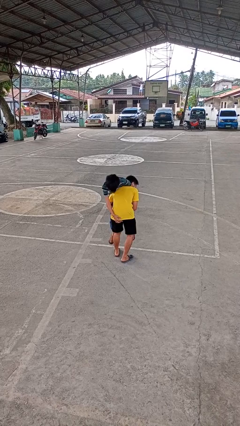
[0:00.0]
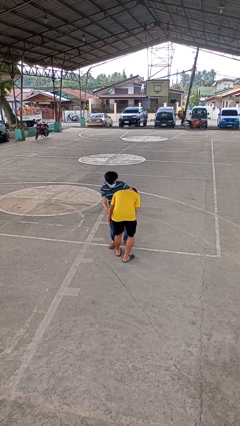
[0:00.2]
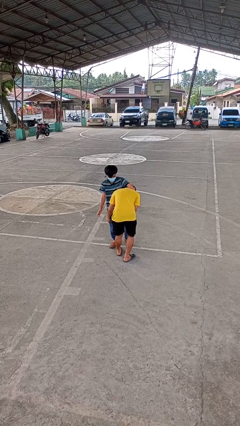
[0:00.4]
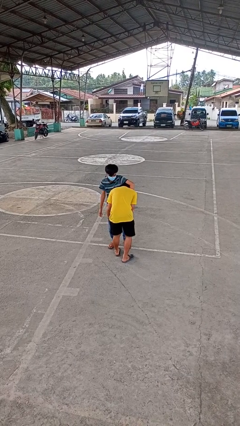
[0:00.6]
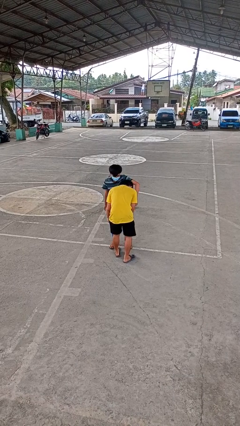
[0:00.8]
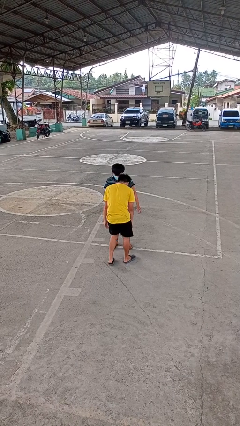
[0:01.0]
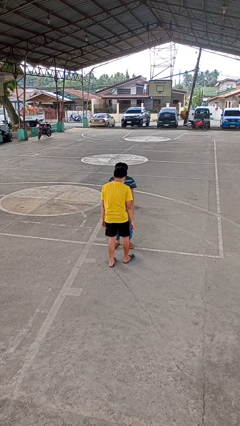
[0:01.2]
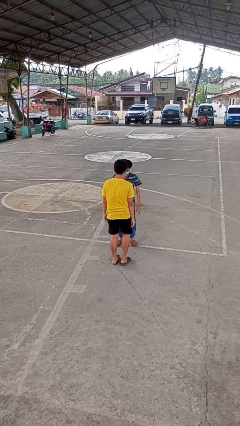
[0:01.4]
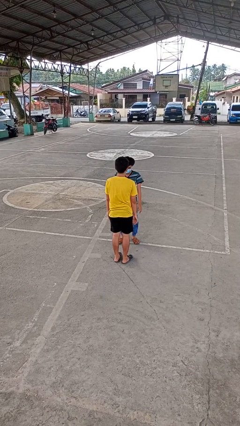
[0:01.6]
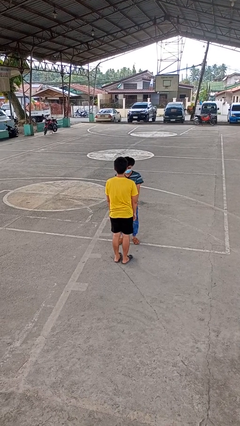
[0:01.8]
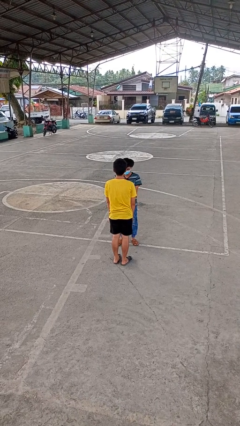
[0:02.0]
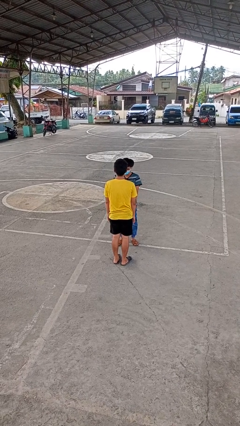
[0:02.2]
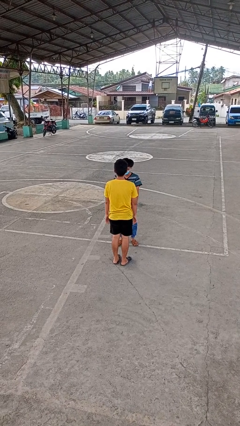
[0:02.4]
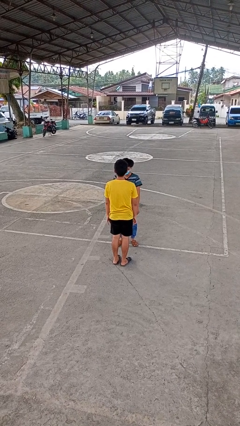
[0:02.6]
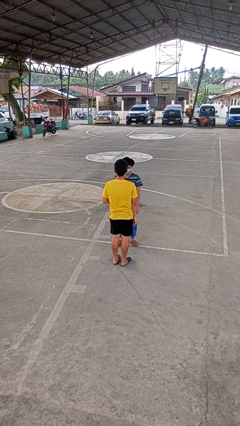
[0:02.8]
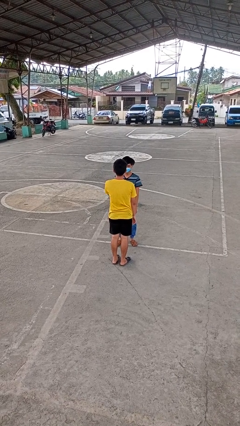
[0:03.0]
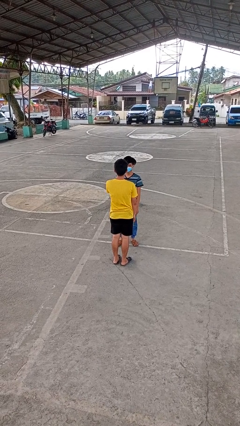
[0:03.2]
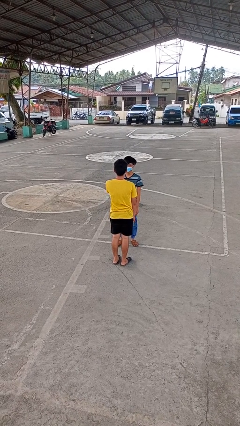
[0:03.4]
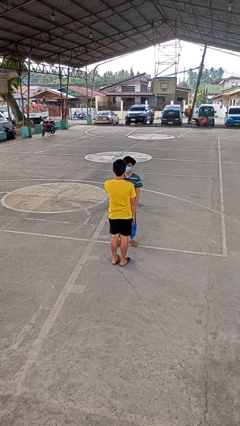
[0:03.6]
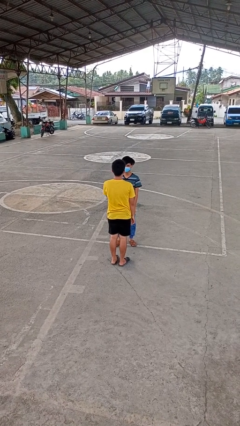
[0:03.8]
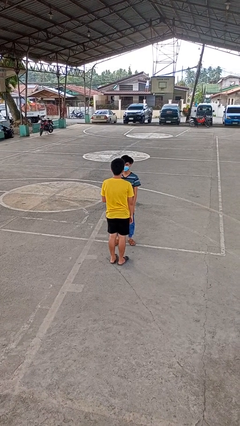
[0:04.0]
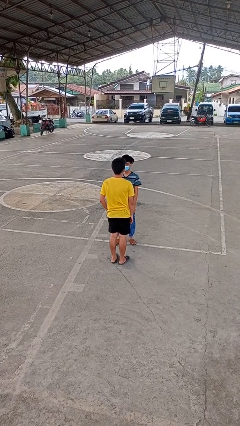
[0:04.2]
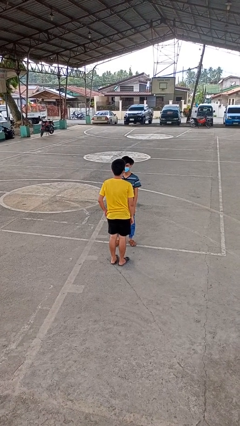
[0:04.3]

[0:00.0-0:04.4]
person puts down person

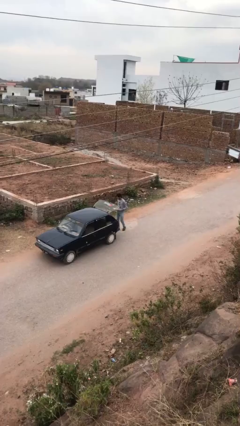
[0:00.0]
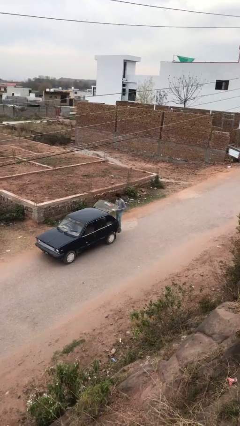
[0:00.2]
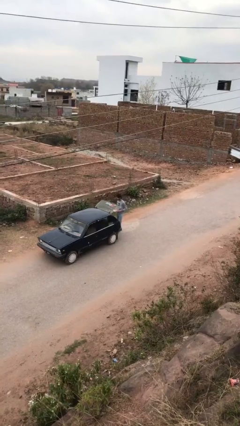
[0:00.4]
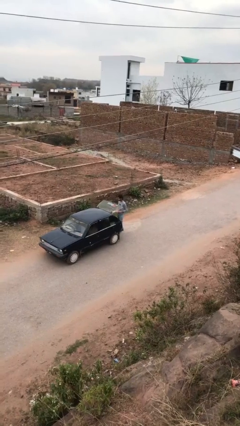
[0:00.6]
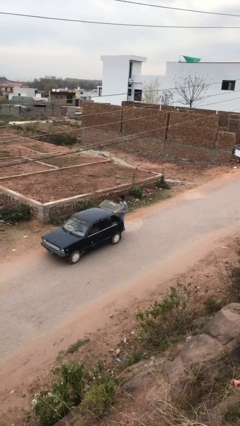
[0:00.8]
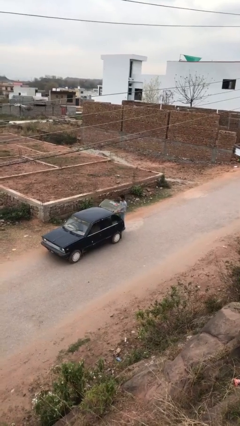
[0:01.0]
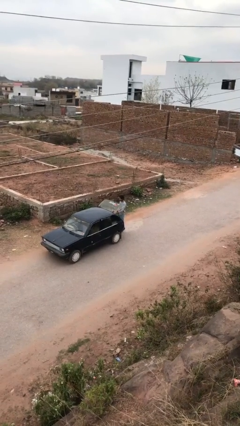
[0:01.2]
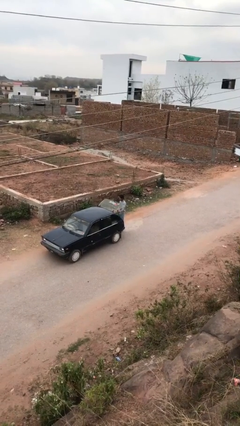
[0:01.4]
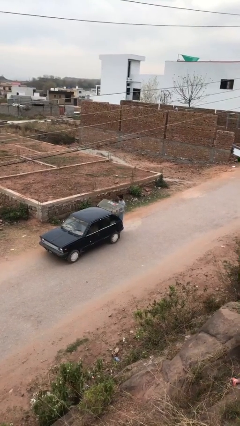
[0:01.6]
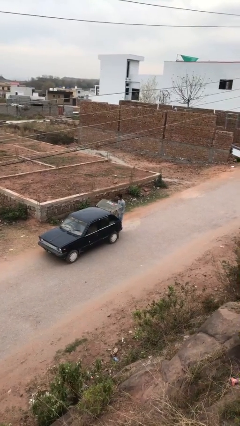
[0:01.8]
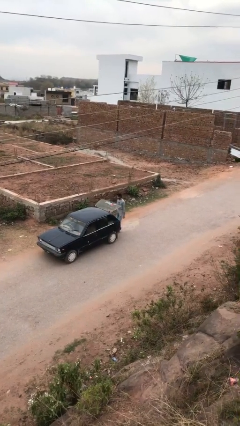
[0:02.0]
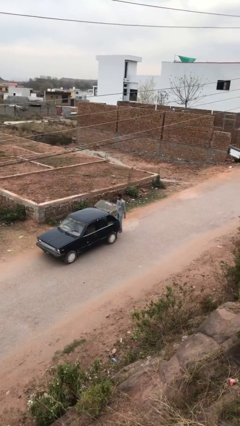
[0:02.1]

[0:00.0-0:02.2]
person loads car

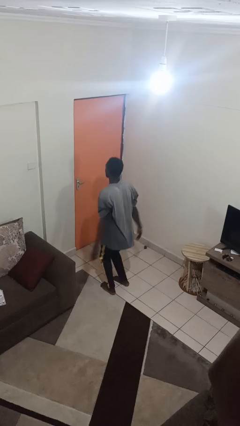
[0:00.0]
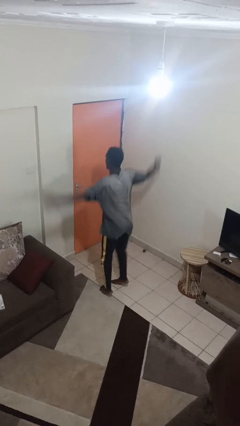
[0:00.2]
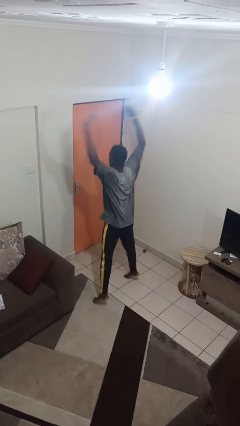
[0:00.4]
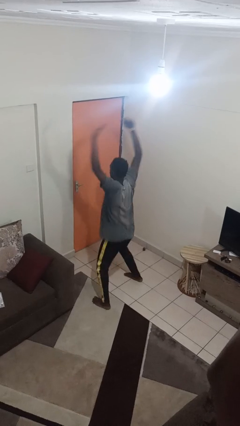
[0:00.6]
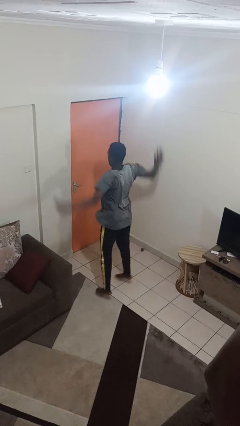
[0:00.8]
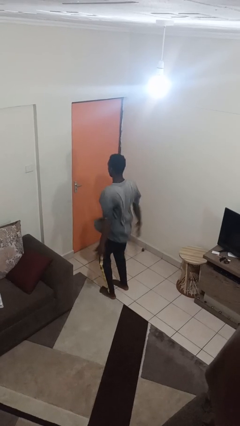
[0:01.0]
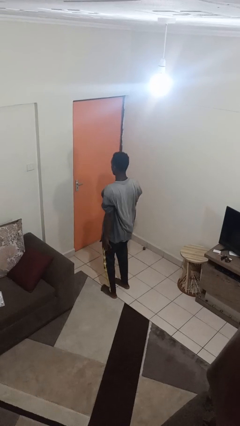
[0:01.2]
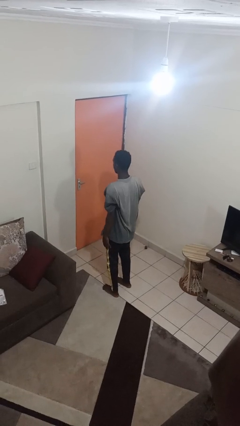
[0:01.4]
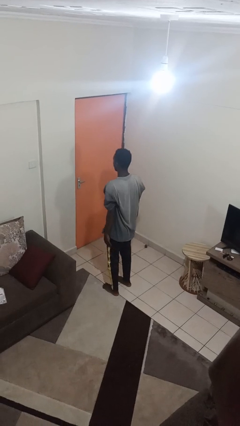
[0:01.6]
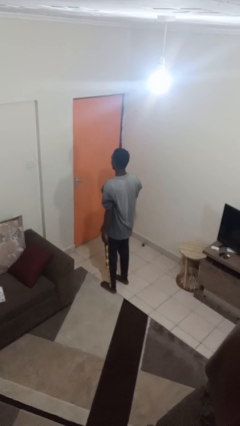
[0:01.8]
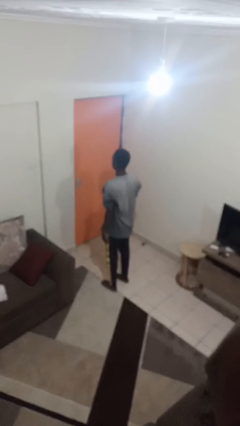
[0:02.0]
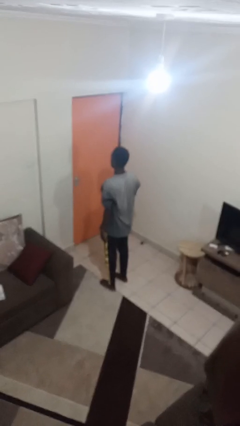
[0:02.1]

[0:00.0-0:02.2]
person exercises with jumping jacks

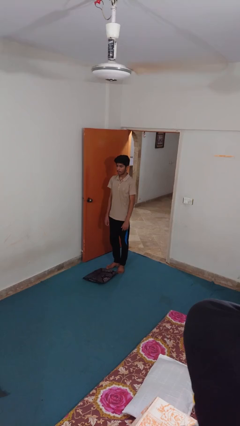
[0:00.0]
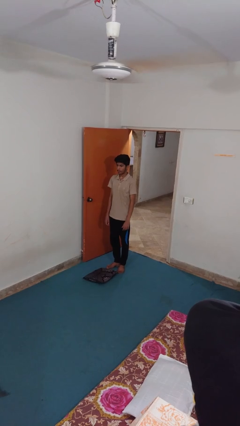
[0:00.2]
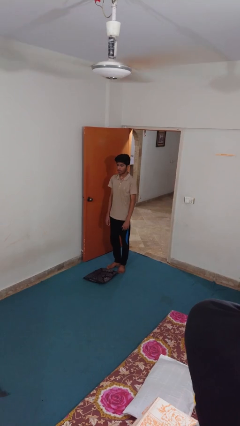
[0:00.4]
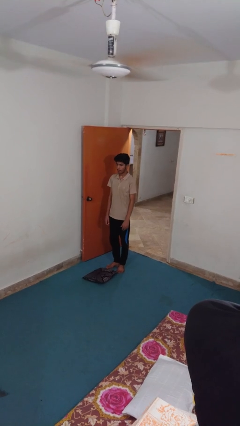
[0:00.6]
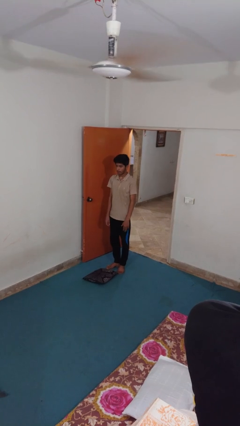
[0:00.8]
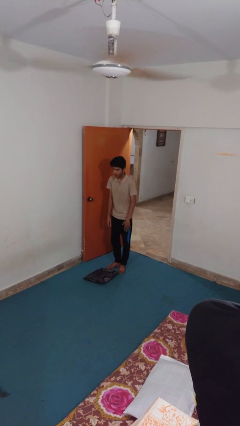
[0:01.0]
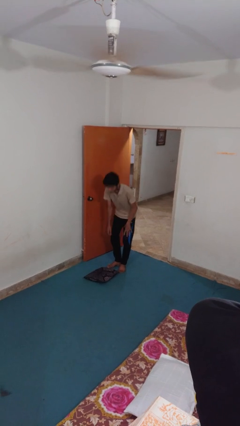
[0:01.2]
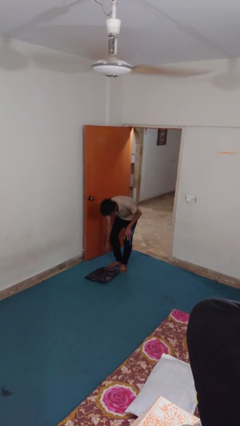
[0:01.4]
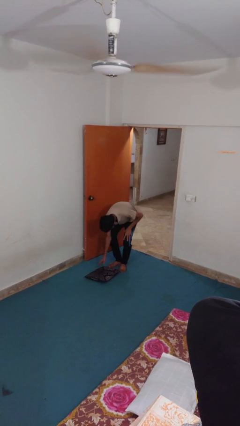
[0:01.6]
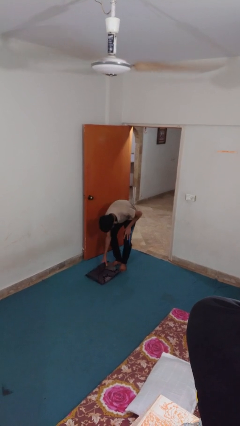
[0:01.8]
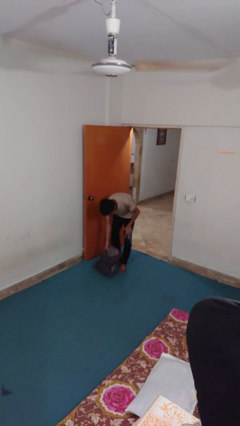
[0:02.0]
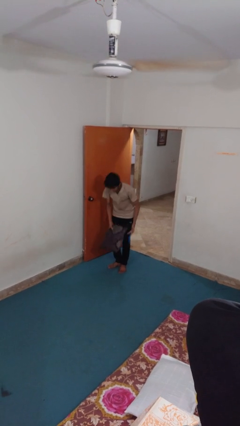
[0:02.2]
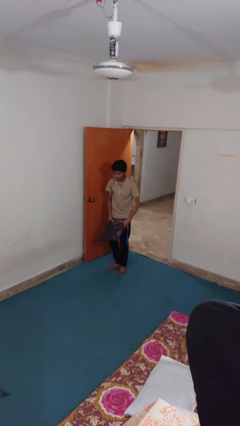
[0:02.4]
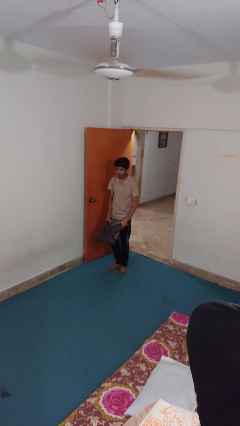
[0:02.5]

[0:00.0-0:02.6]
person picks up object from floor

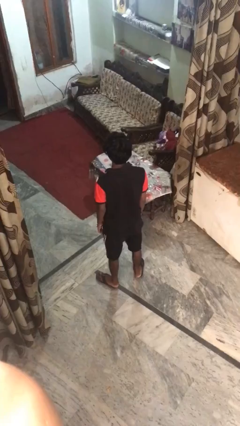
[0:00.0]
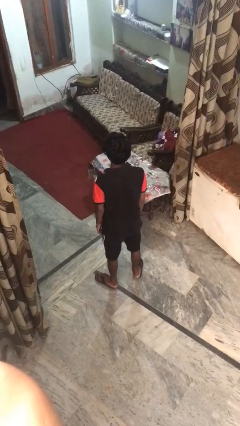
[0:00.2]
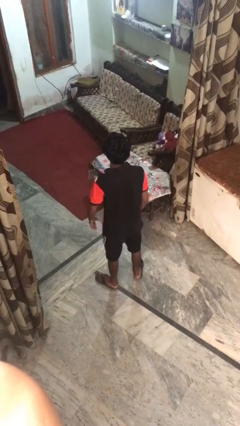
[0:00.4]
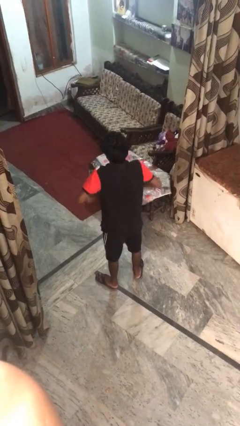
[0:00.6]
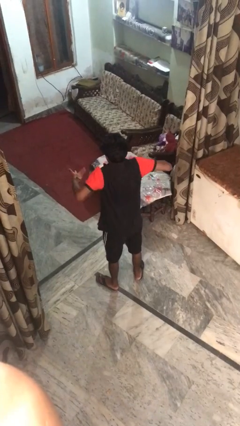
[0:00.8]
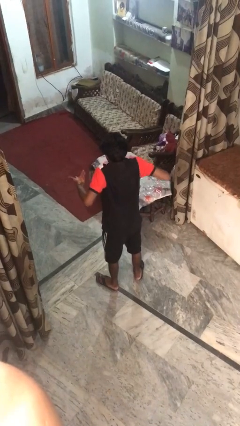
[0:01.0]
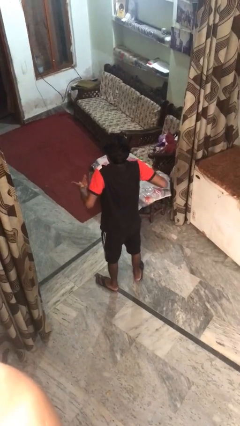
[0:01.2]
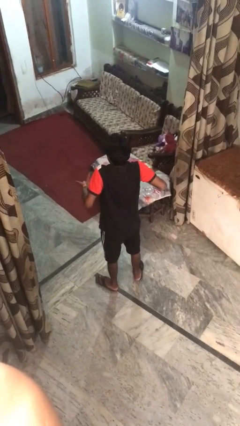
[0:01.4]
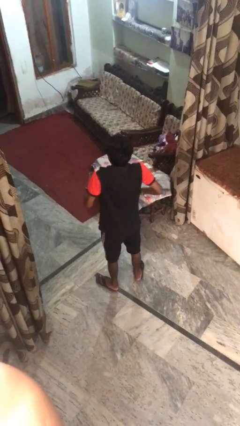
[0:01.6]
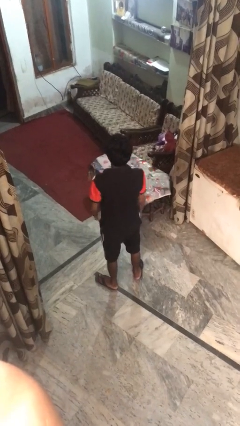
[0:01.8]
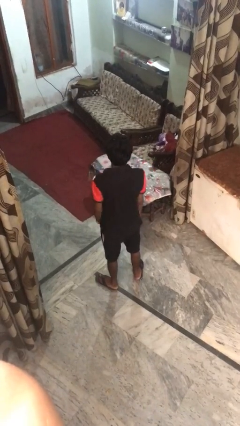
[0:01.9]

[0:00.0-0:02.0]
person shrugs

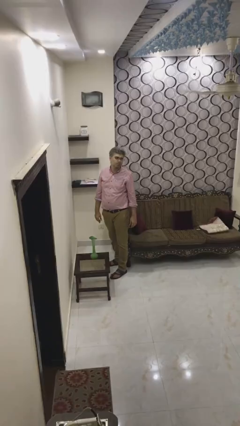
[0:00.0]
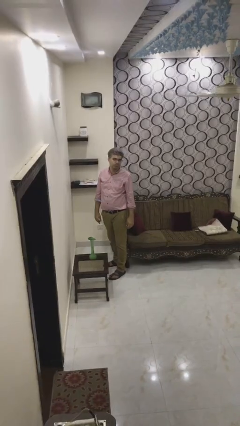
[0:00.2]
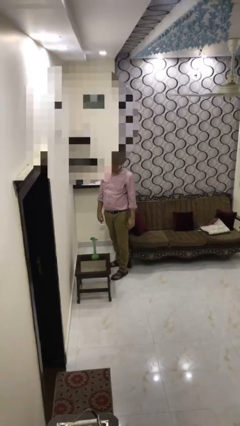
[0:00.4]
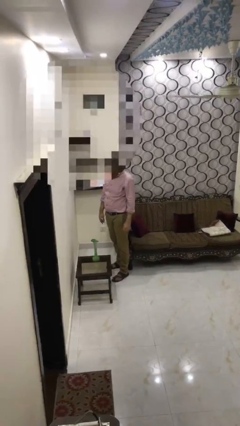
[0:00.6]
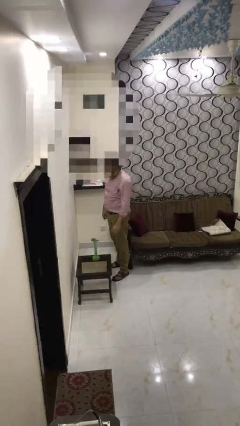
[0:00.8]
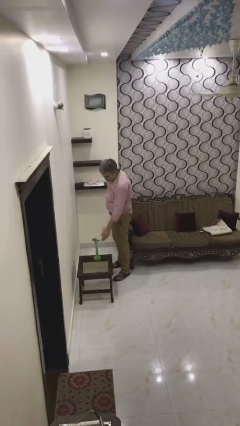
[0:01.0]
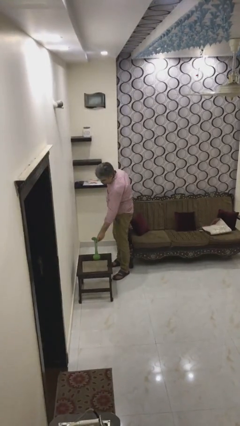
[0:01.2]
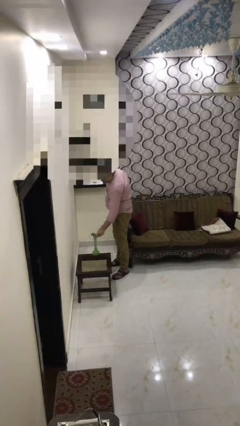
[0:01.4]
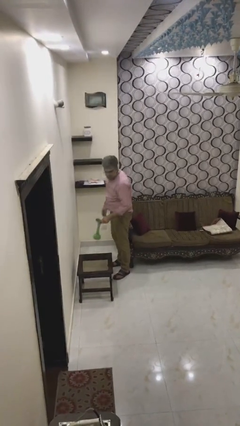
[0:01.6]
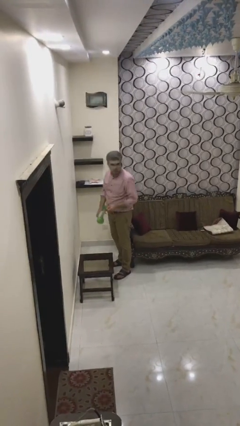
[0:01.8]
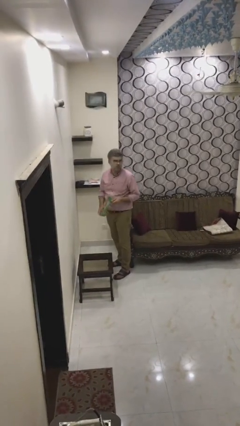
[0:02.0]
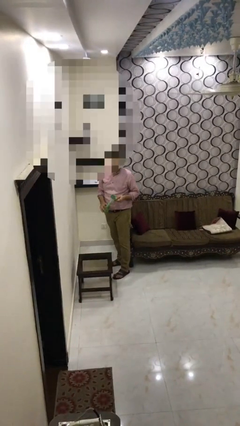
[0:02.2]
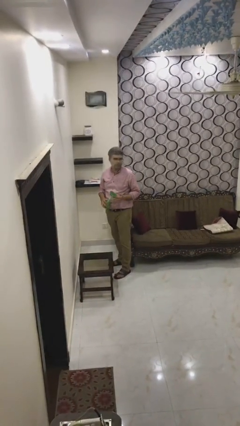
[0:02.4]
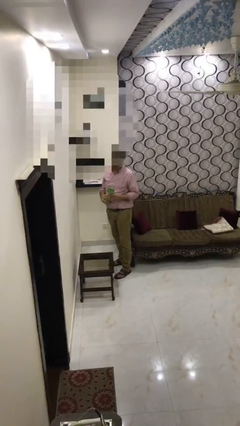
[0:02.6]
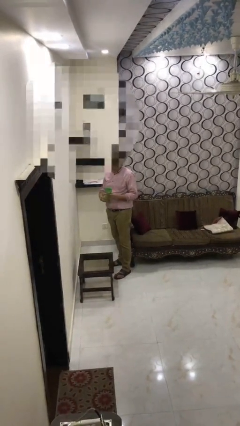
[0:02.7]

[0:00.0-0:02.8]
person picks up object from table

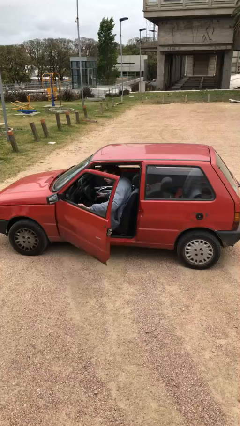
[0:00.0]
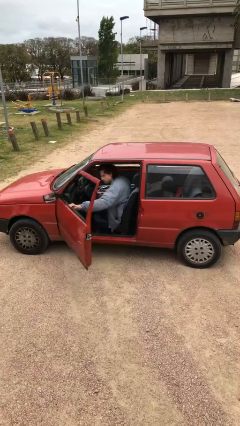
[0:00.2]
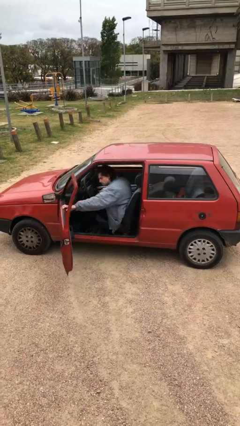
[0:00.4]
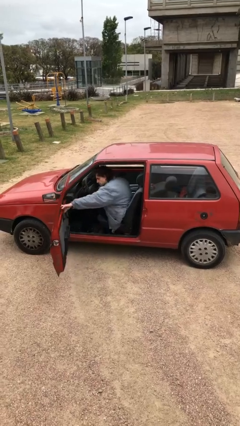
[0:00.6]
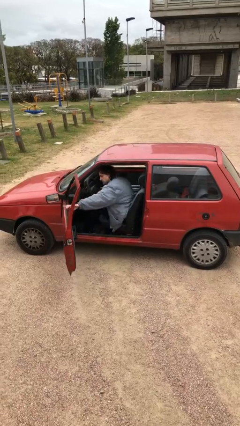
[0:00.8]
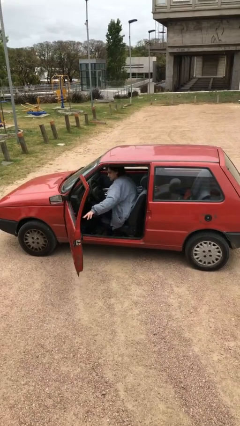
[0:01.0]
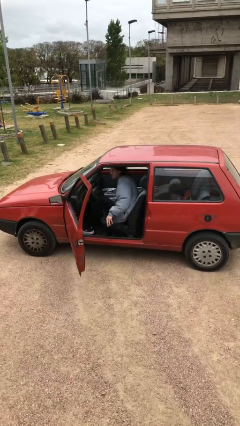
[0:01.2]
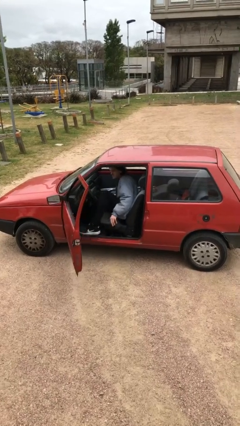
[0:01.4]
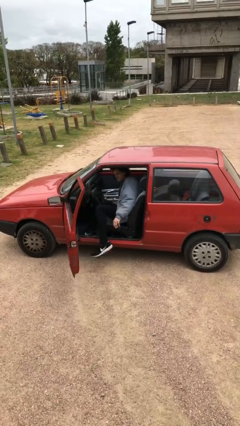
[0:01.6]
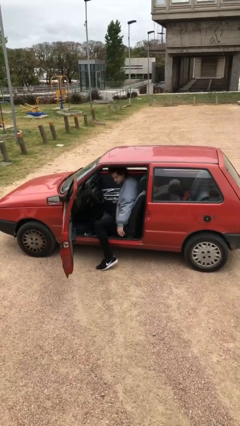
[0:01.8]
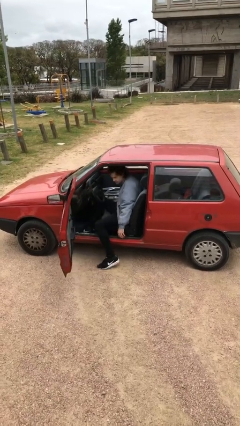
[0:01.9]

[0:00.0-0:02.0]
person opens car door
